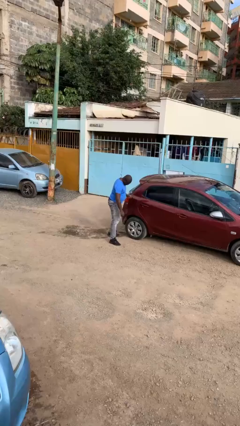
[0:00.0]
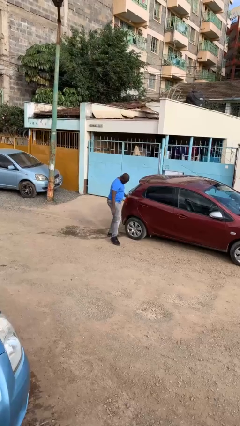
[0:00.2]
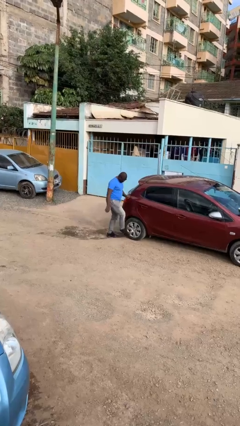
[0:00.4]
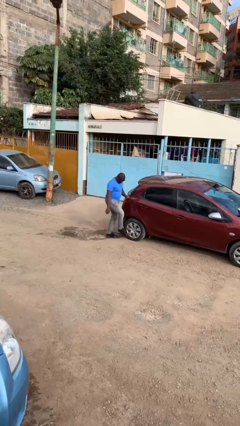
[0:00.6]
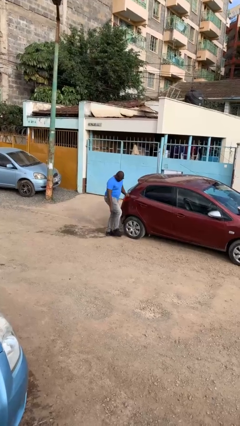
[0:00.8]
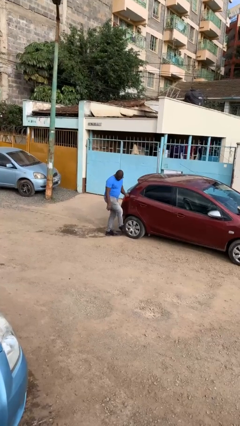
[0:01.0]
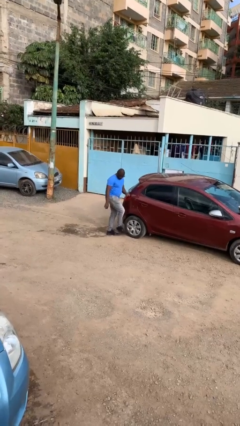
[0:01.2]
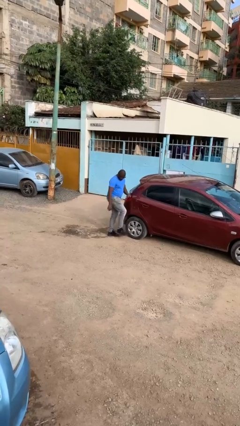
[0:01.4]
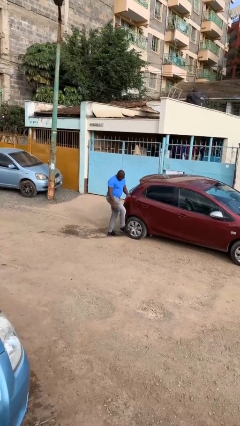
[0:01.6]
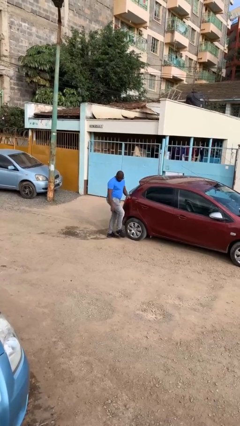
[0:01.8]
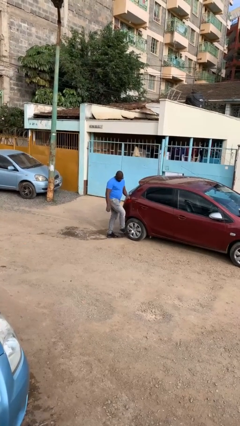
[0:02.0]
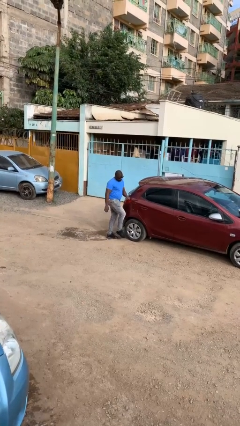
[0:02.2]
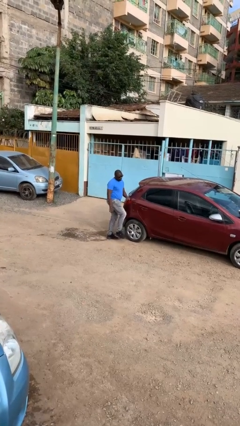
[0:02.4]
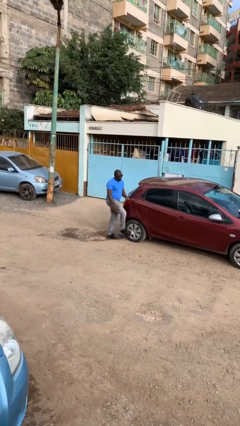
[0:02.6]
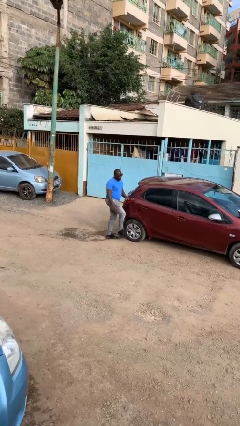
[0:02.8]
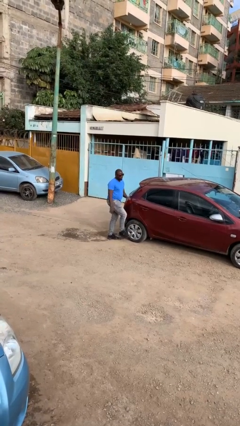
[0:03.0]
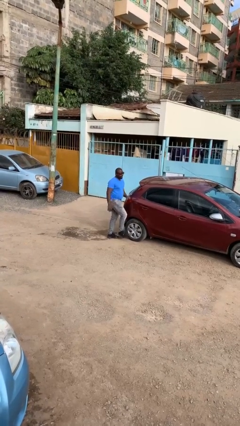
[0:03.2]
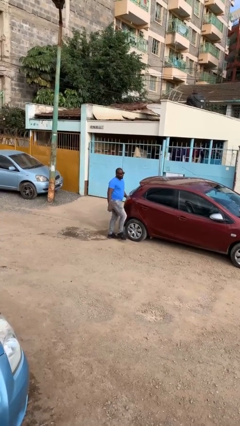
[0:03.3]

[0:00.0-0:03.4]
person kicks car tires

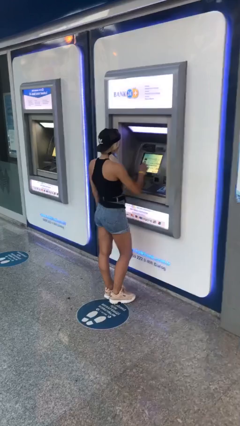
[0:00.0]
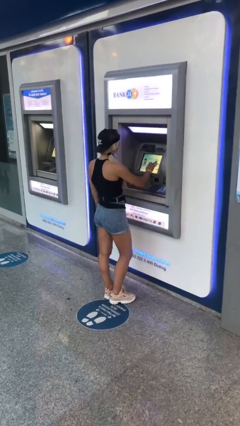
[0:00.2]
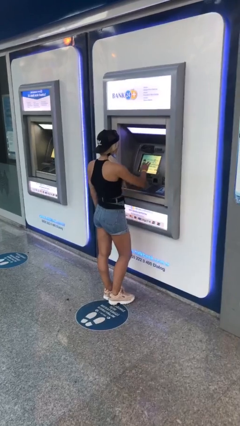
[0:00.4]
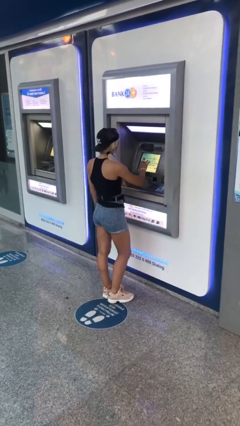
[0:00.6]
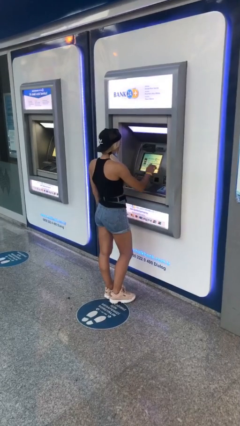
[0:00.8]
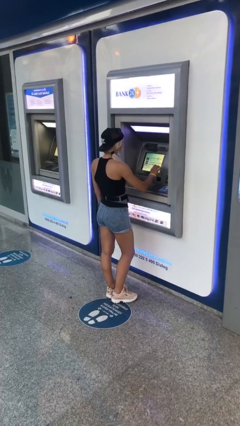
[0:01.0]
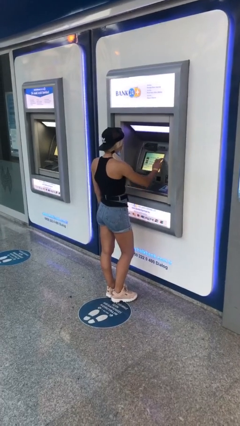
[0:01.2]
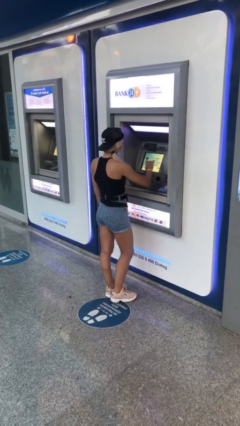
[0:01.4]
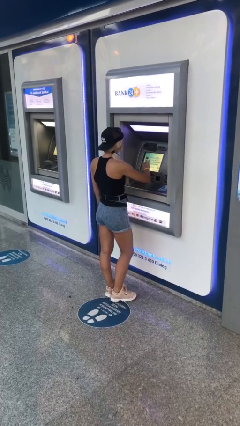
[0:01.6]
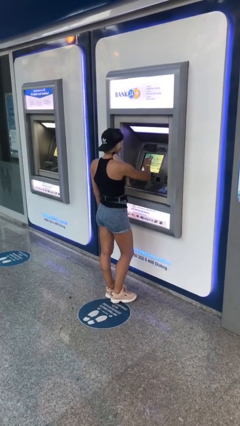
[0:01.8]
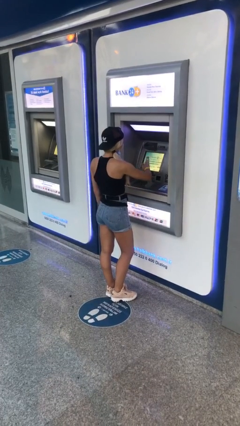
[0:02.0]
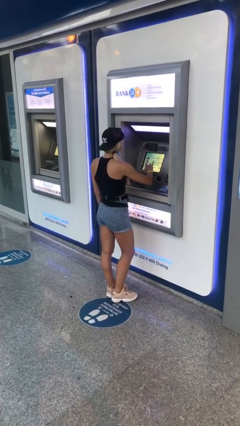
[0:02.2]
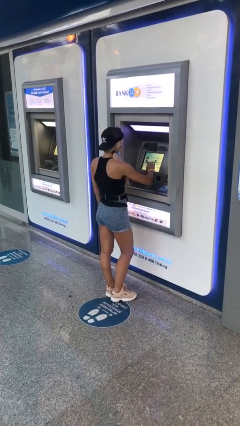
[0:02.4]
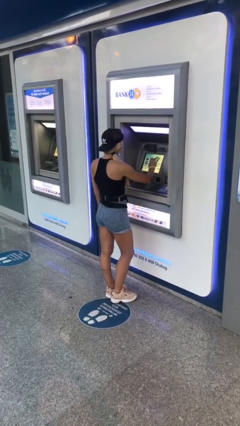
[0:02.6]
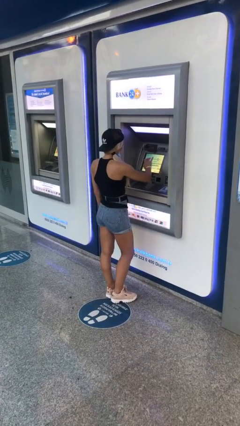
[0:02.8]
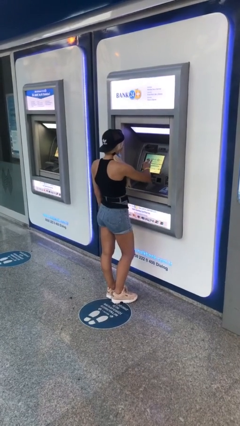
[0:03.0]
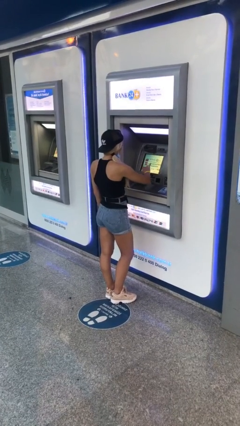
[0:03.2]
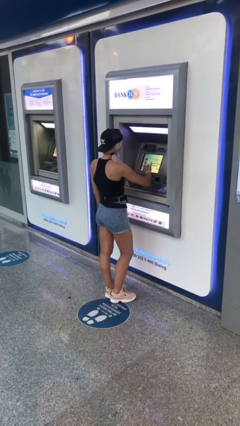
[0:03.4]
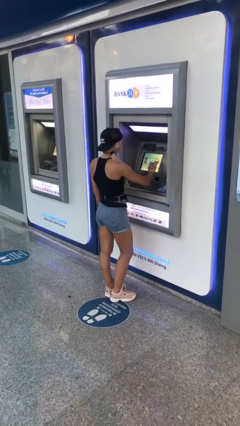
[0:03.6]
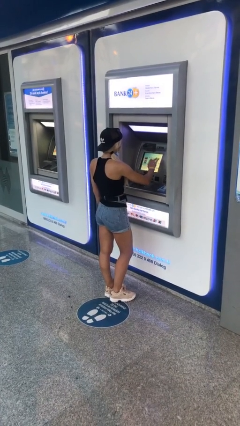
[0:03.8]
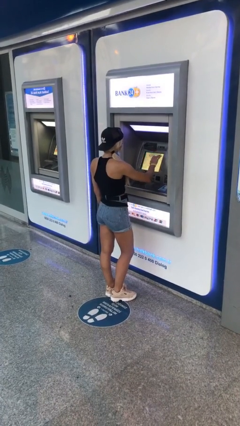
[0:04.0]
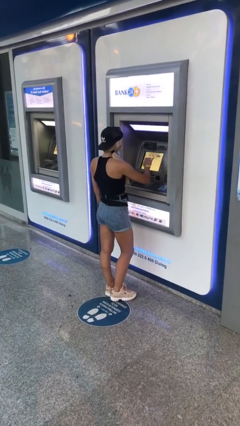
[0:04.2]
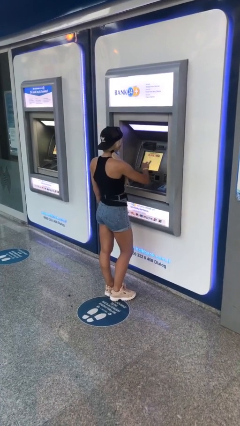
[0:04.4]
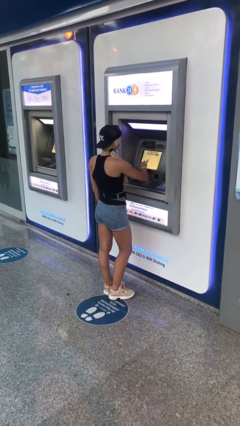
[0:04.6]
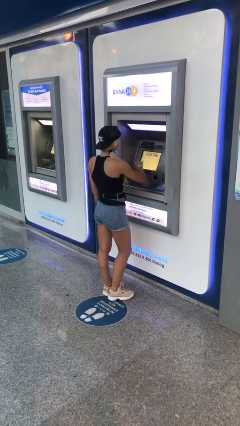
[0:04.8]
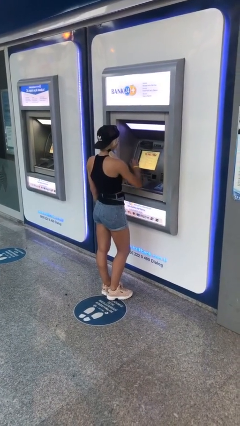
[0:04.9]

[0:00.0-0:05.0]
person purchases from machine

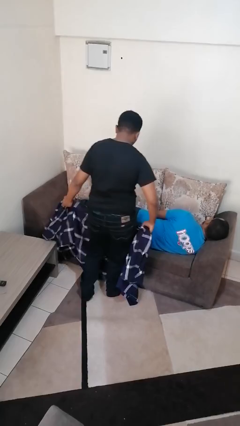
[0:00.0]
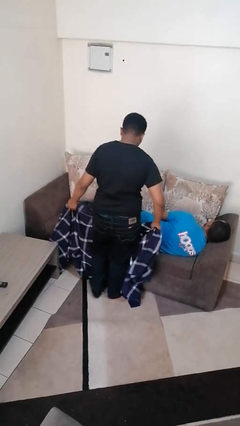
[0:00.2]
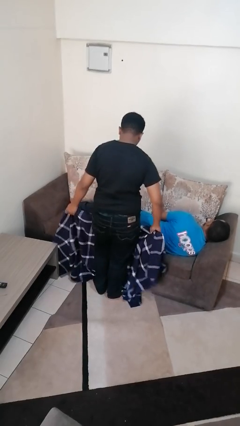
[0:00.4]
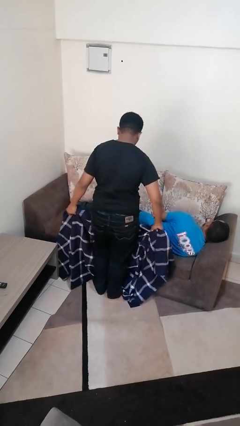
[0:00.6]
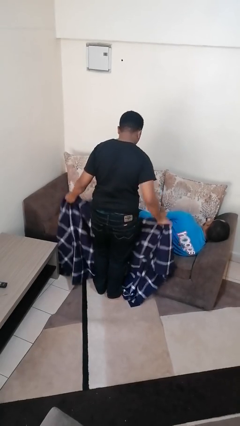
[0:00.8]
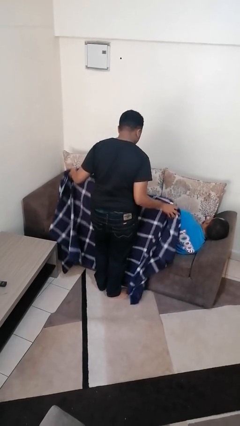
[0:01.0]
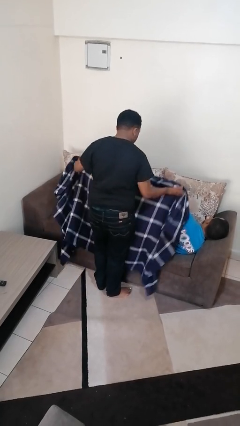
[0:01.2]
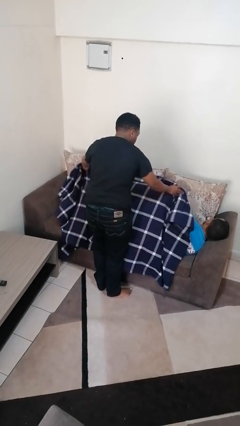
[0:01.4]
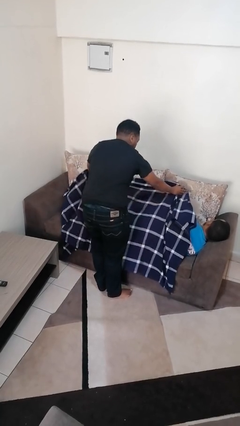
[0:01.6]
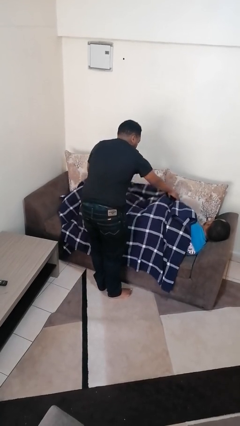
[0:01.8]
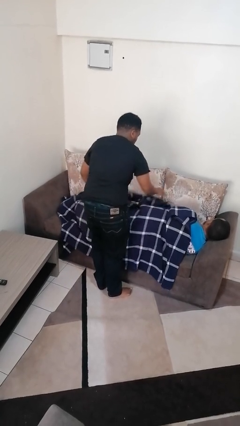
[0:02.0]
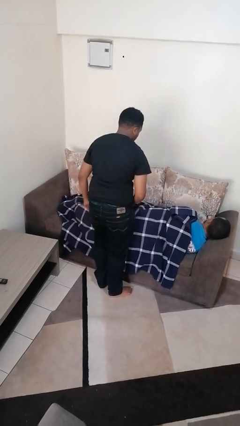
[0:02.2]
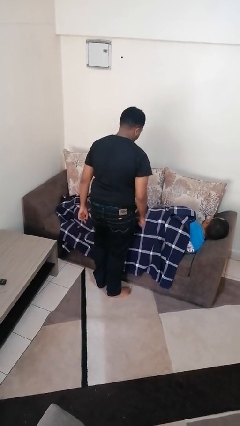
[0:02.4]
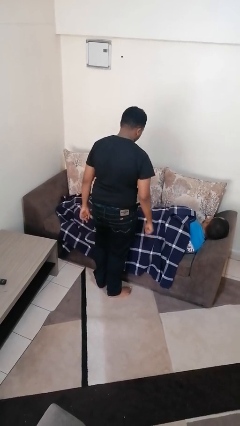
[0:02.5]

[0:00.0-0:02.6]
person covers friend with blanket

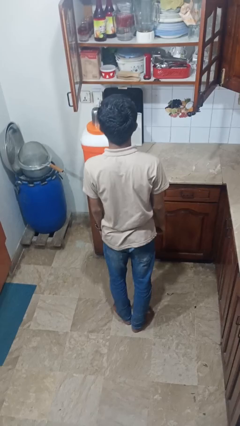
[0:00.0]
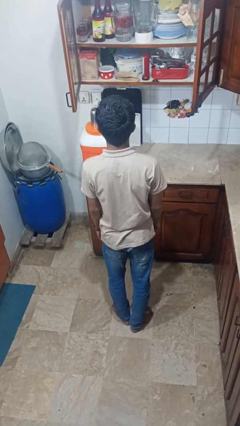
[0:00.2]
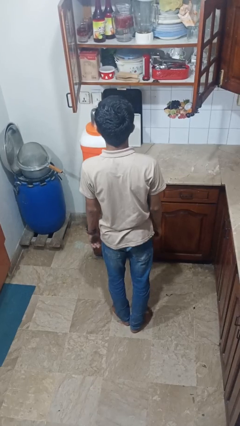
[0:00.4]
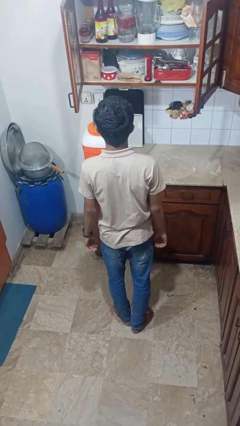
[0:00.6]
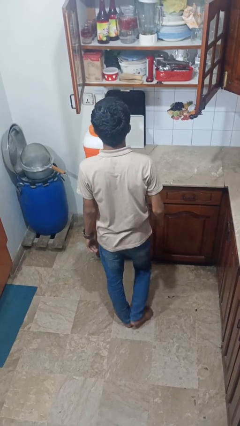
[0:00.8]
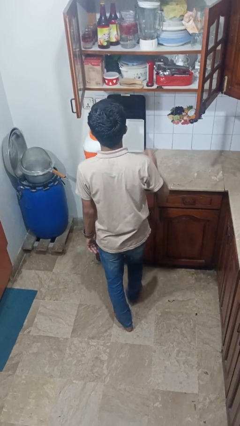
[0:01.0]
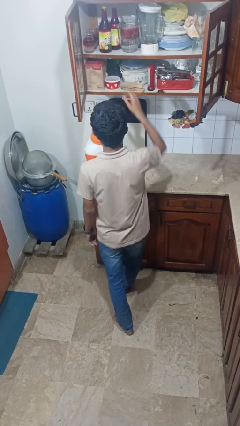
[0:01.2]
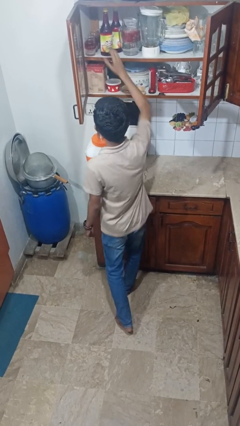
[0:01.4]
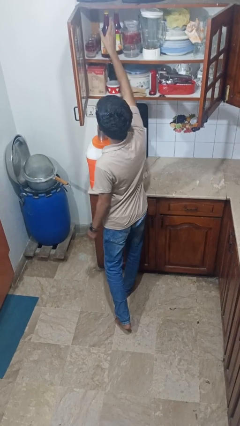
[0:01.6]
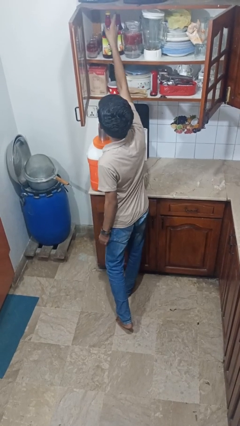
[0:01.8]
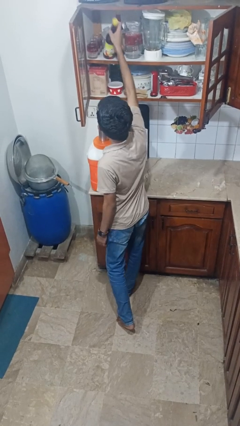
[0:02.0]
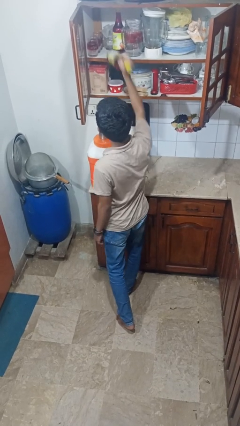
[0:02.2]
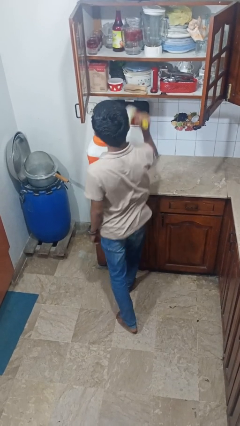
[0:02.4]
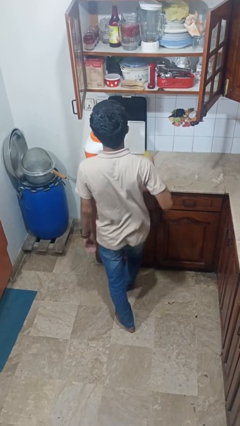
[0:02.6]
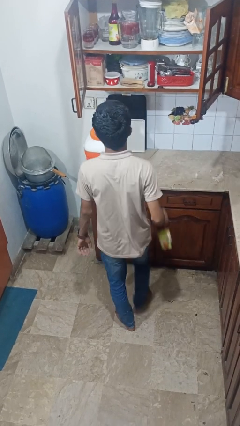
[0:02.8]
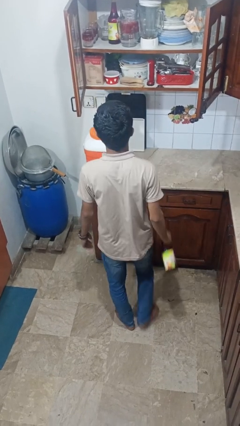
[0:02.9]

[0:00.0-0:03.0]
person picks up object from cabinet

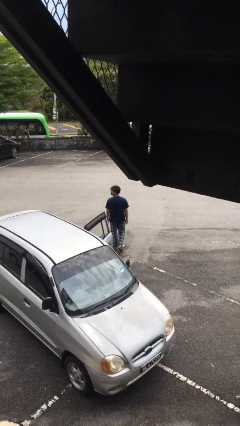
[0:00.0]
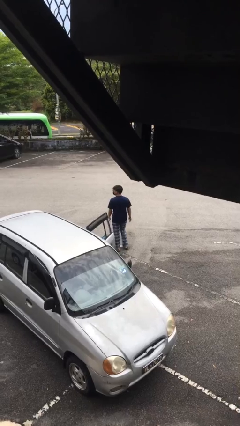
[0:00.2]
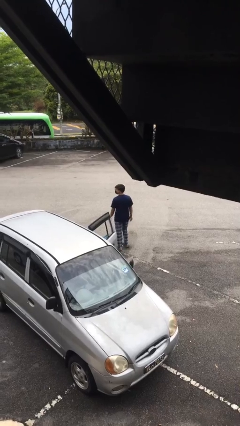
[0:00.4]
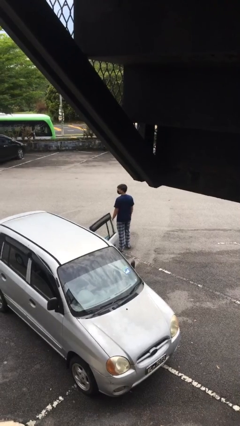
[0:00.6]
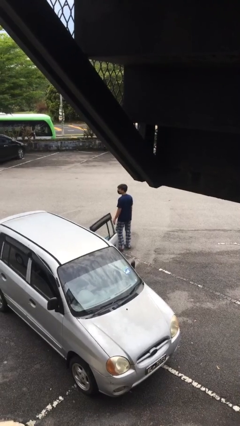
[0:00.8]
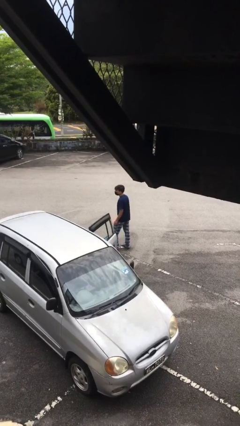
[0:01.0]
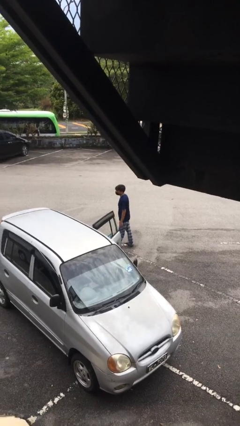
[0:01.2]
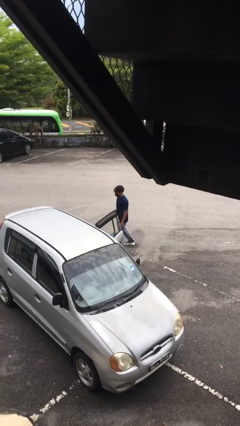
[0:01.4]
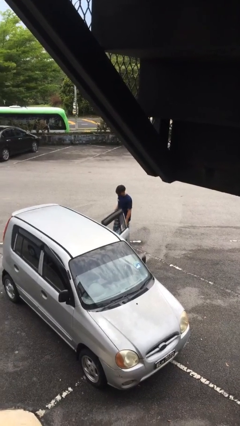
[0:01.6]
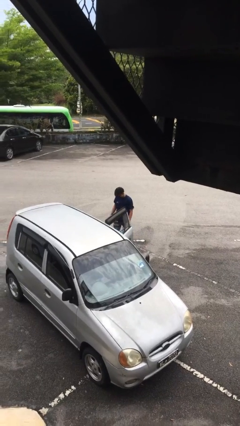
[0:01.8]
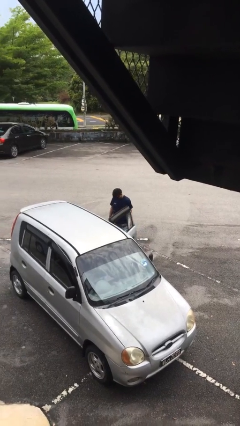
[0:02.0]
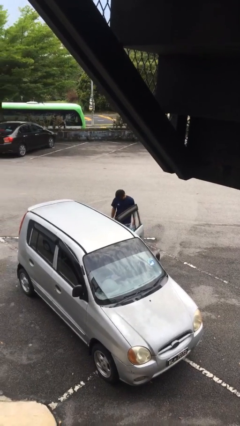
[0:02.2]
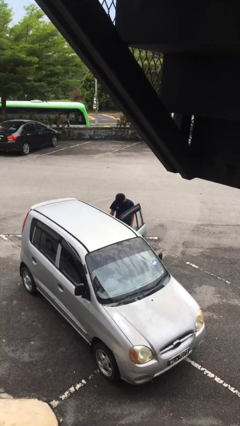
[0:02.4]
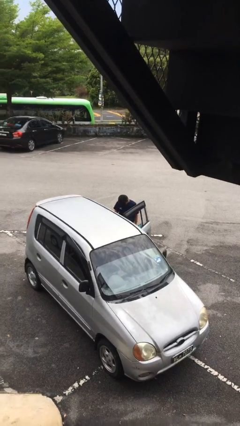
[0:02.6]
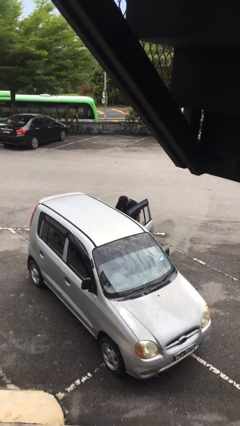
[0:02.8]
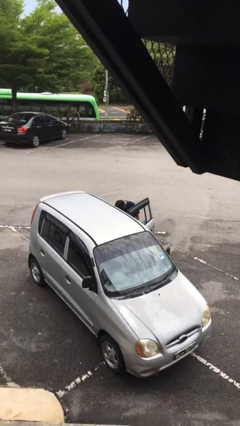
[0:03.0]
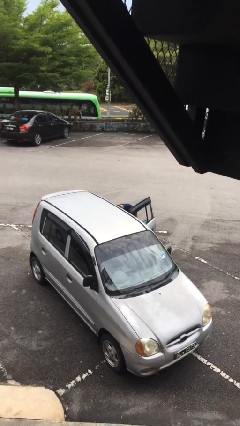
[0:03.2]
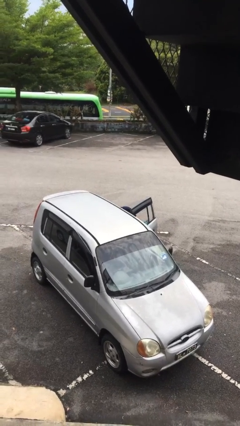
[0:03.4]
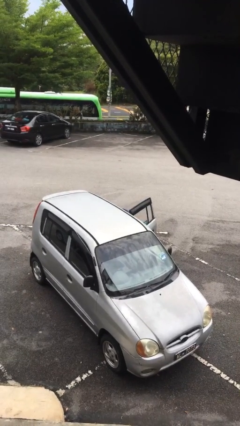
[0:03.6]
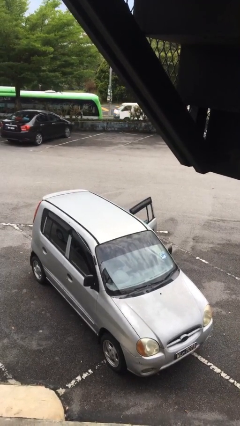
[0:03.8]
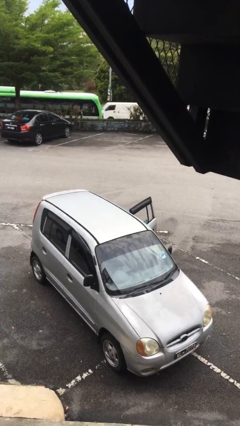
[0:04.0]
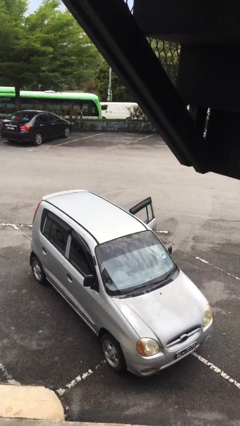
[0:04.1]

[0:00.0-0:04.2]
person enters car
